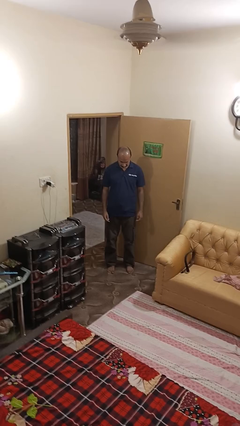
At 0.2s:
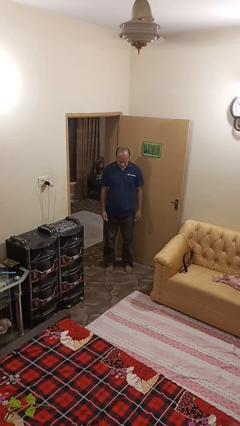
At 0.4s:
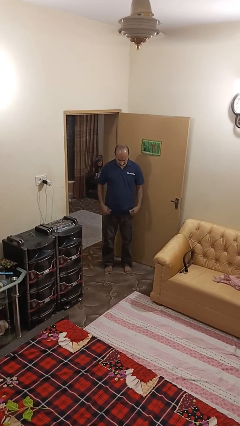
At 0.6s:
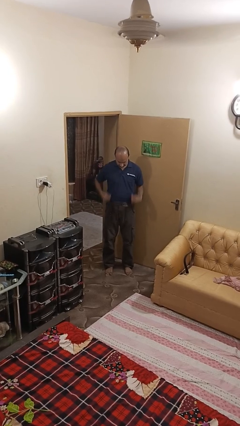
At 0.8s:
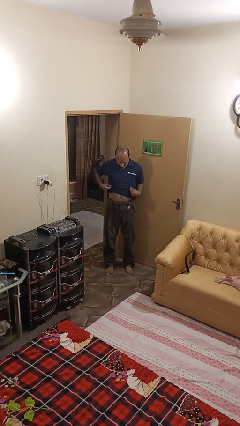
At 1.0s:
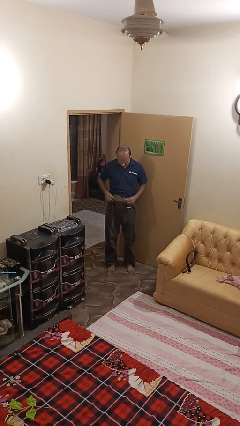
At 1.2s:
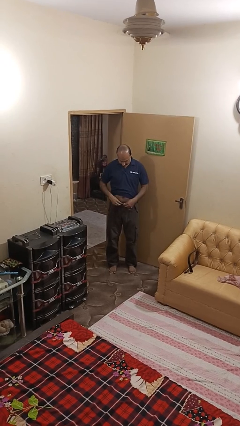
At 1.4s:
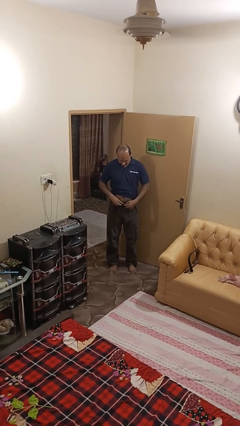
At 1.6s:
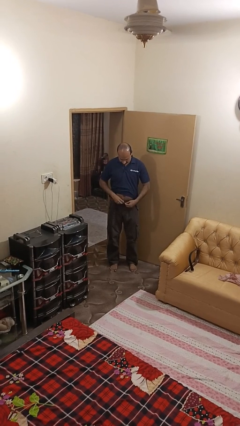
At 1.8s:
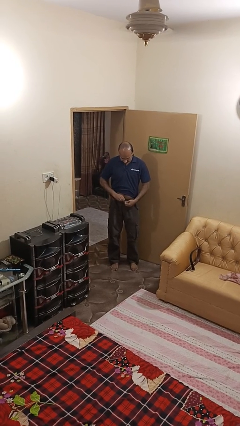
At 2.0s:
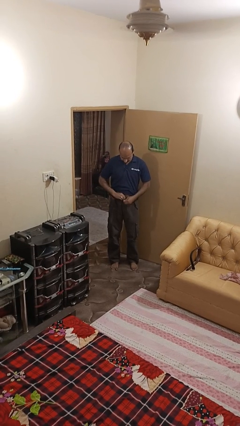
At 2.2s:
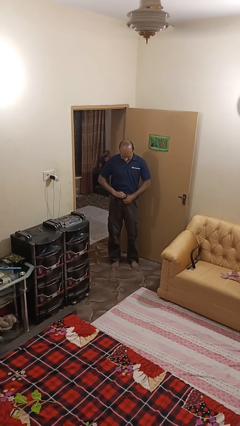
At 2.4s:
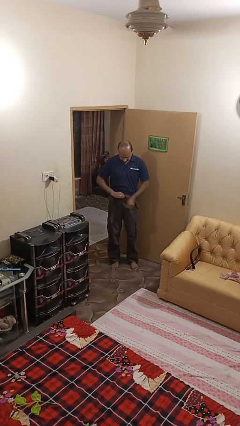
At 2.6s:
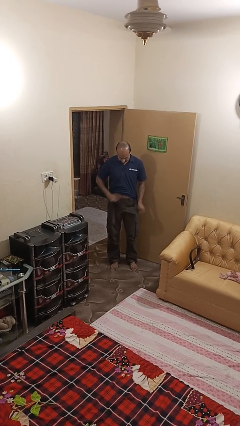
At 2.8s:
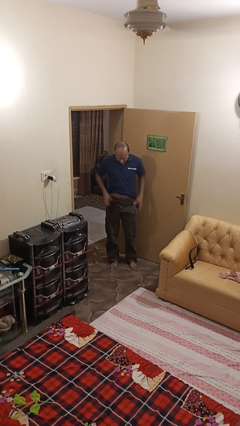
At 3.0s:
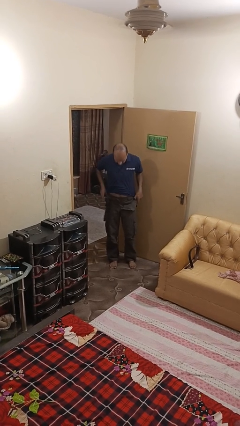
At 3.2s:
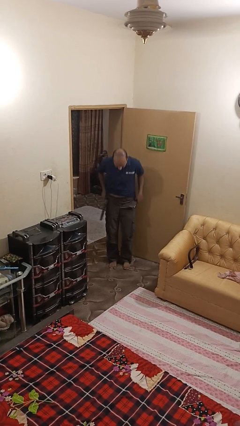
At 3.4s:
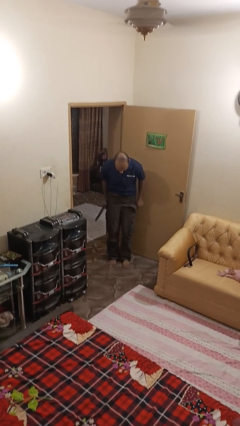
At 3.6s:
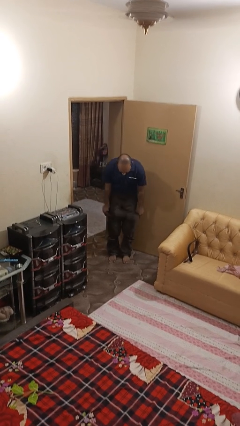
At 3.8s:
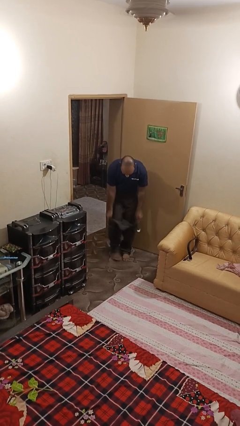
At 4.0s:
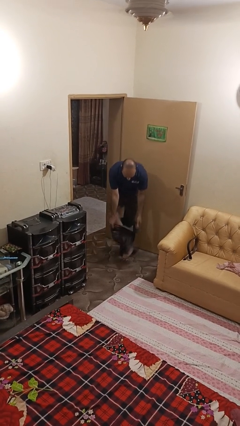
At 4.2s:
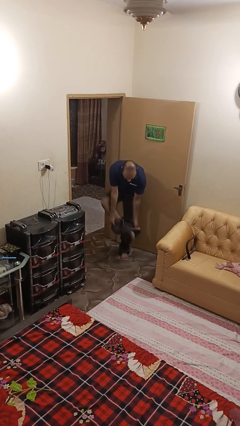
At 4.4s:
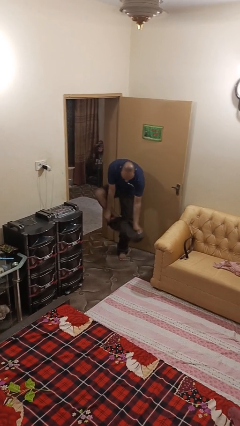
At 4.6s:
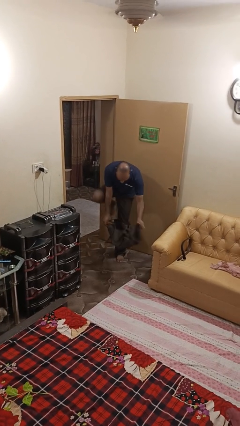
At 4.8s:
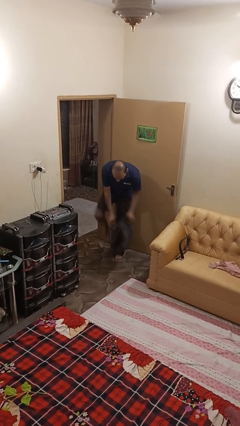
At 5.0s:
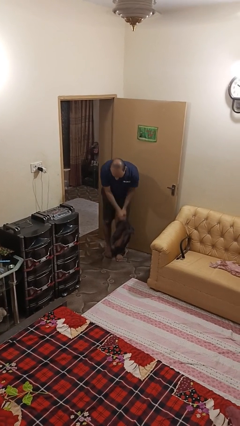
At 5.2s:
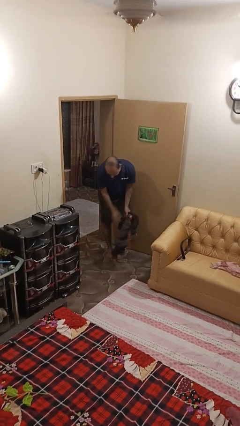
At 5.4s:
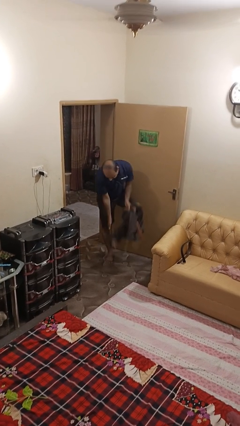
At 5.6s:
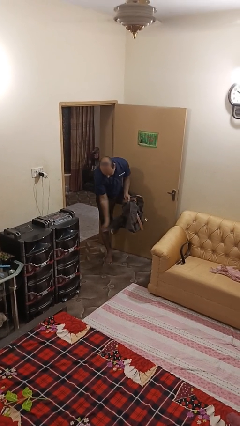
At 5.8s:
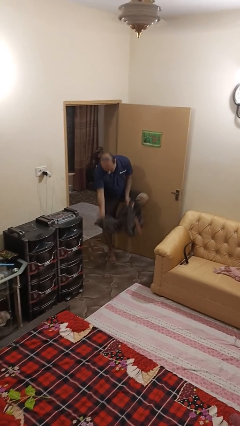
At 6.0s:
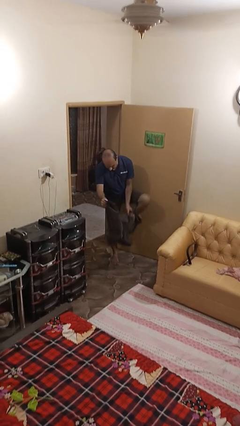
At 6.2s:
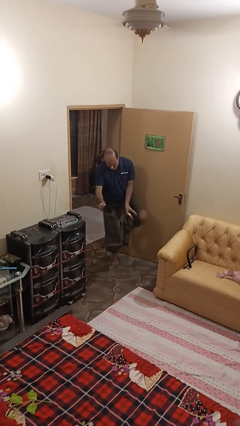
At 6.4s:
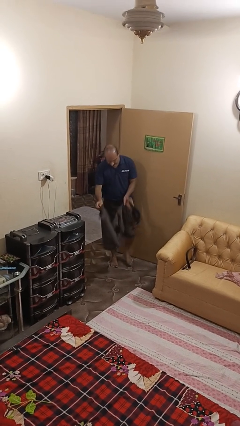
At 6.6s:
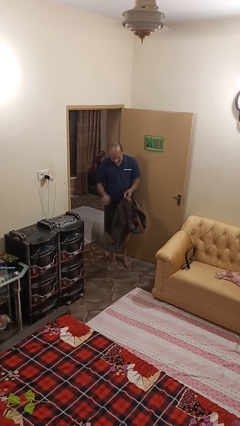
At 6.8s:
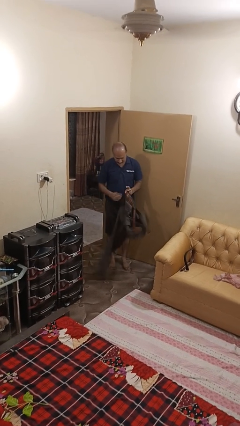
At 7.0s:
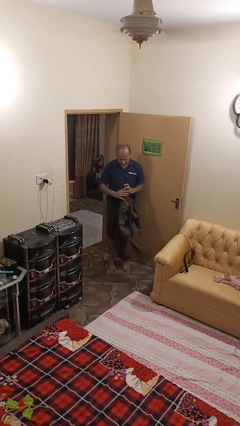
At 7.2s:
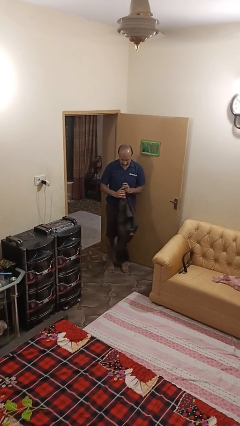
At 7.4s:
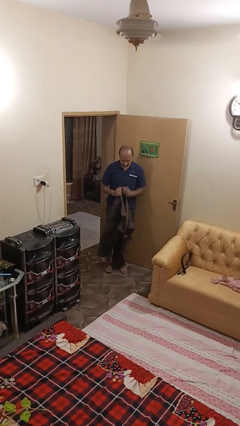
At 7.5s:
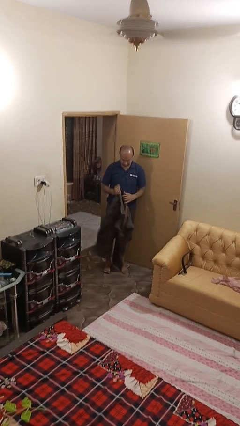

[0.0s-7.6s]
person takes off pants

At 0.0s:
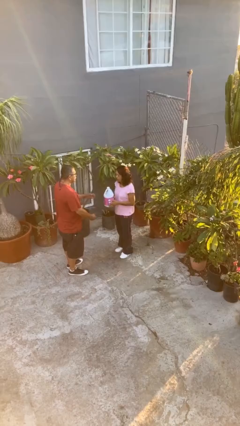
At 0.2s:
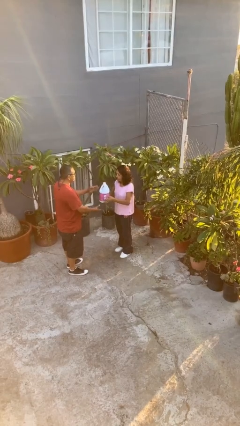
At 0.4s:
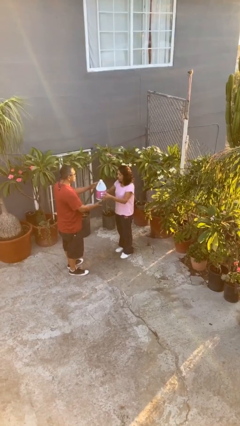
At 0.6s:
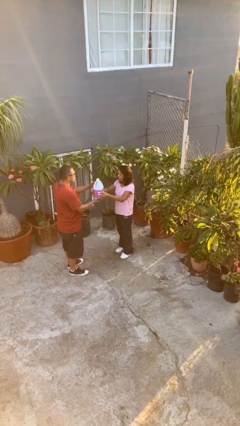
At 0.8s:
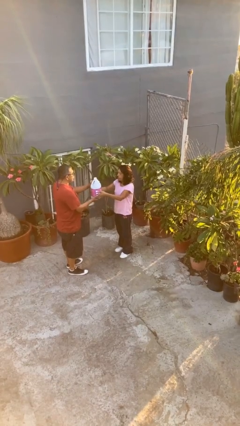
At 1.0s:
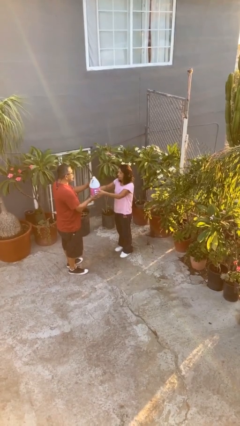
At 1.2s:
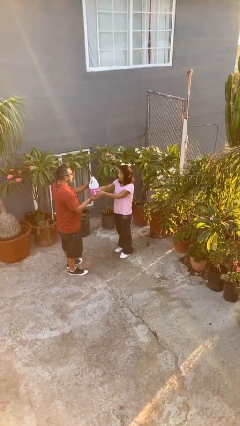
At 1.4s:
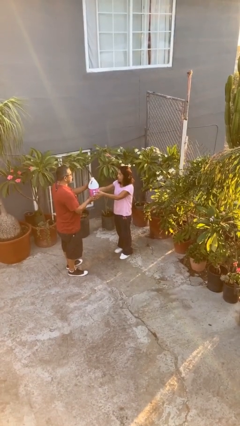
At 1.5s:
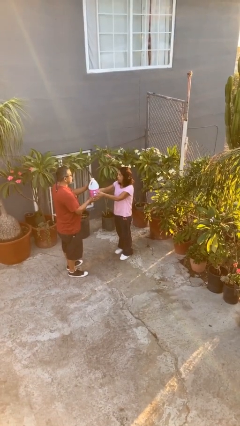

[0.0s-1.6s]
person transfers object to person

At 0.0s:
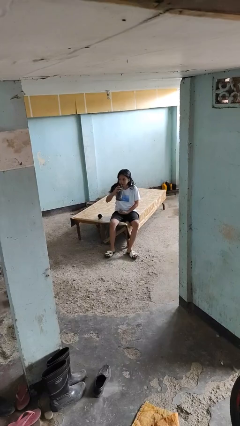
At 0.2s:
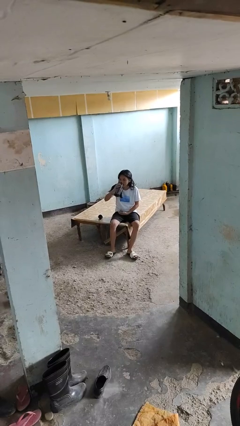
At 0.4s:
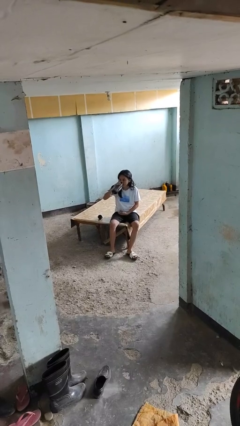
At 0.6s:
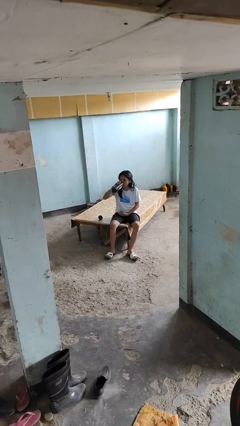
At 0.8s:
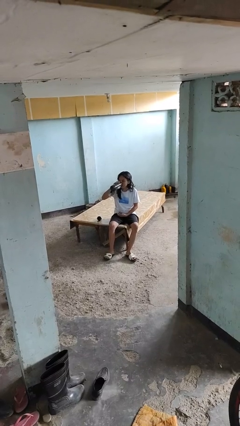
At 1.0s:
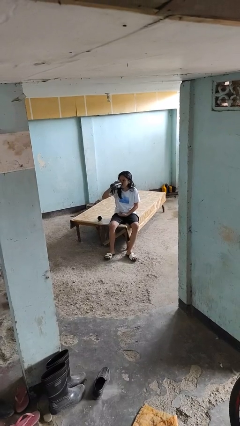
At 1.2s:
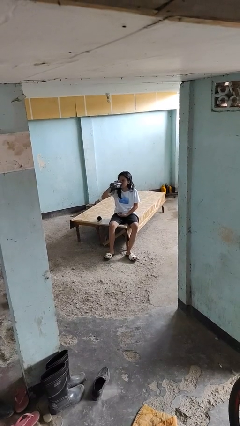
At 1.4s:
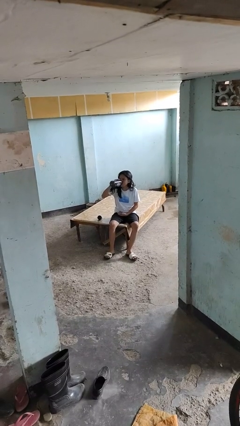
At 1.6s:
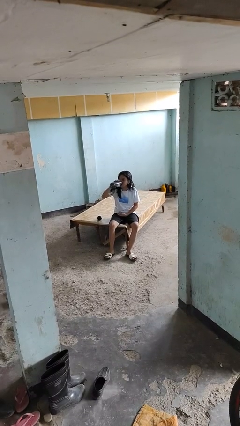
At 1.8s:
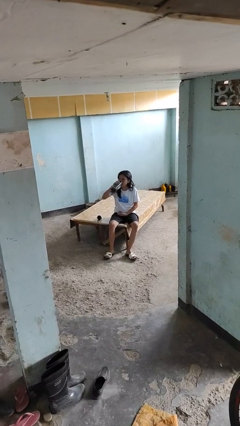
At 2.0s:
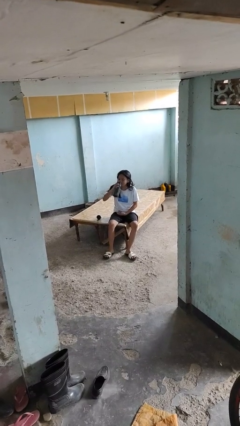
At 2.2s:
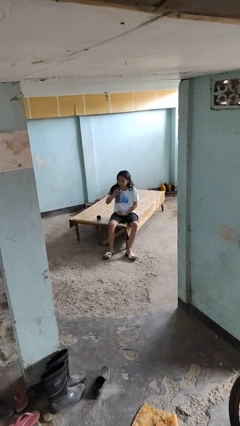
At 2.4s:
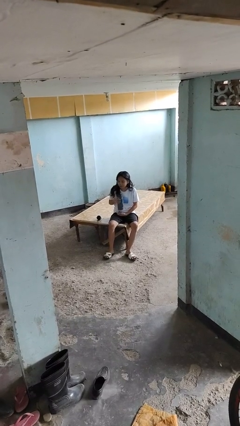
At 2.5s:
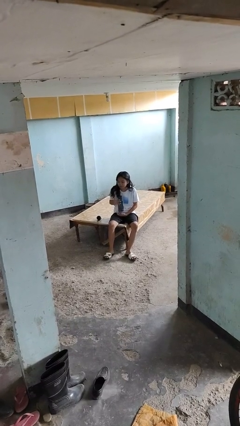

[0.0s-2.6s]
person drinks from bottle

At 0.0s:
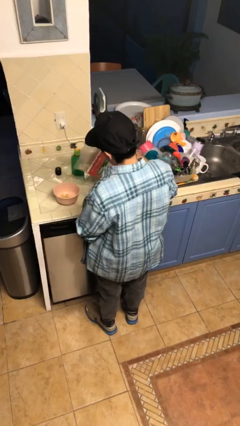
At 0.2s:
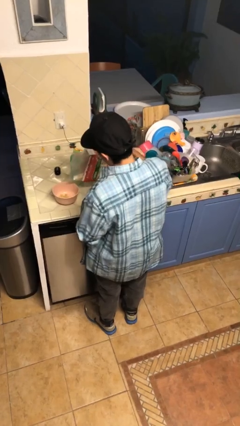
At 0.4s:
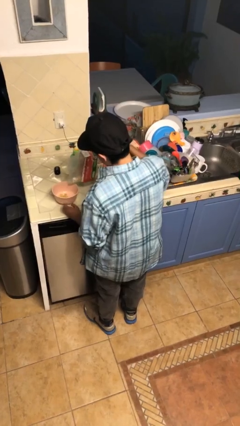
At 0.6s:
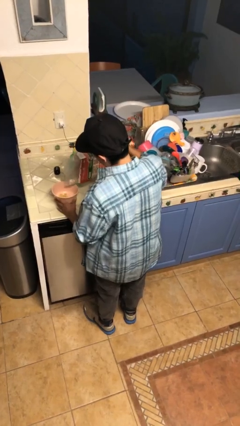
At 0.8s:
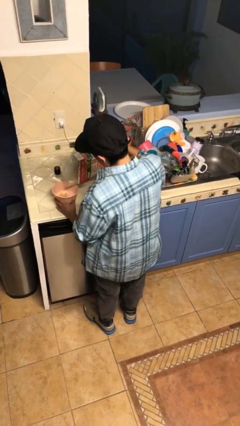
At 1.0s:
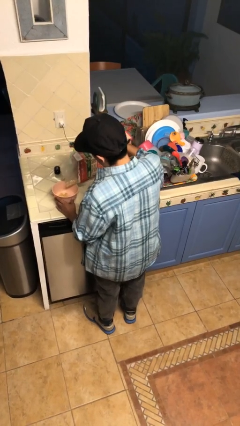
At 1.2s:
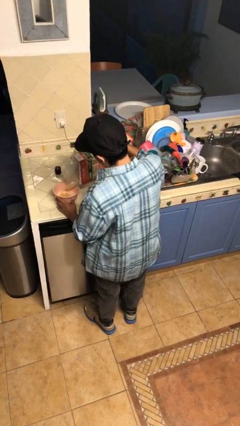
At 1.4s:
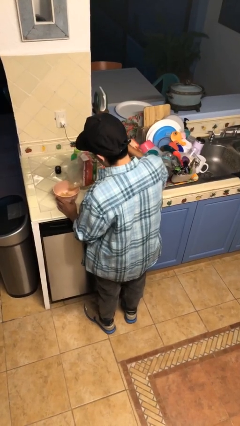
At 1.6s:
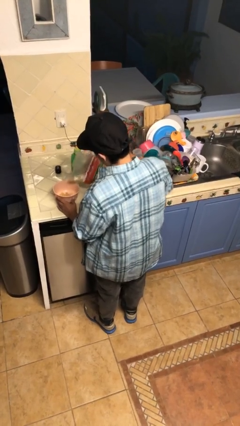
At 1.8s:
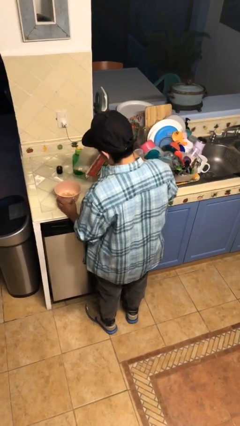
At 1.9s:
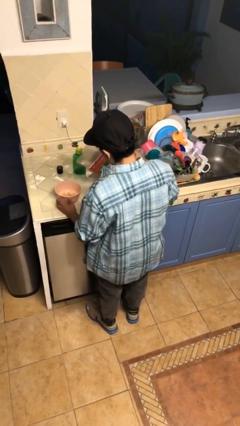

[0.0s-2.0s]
person pours into bowl

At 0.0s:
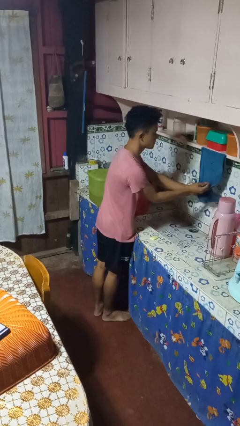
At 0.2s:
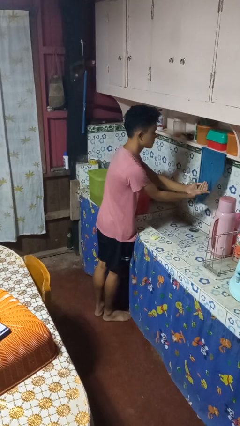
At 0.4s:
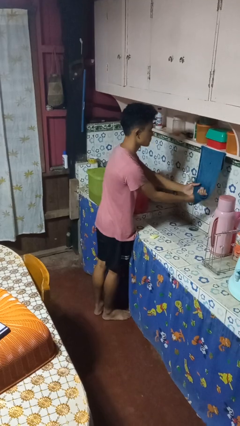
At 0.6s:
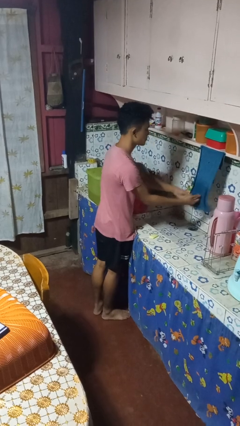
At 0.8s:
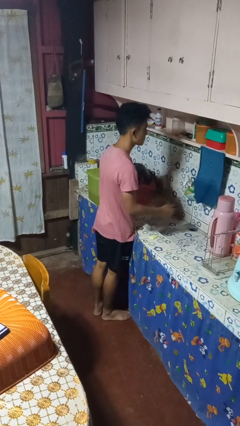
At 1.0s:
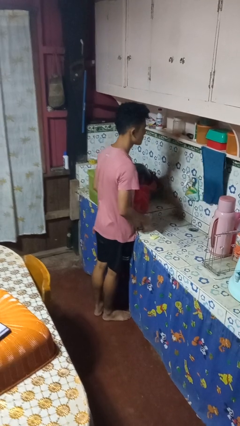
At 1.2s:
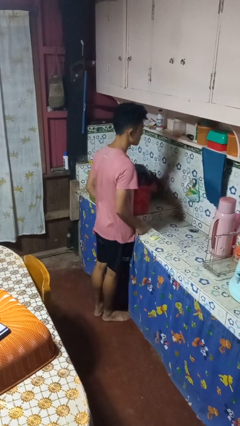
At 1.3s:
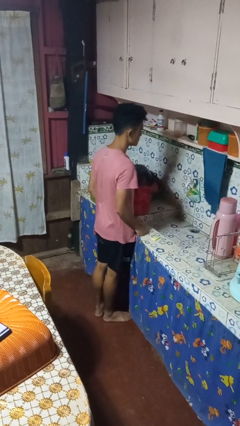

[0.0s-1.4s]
person dries hands with towel

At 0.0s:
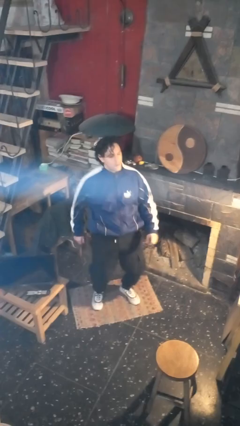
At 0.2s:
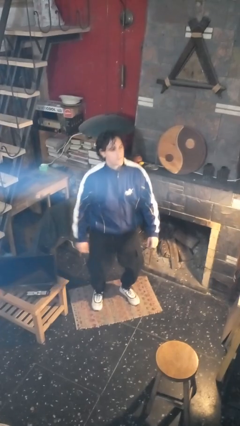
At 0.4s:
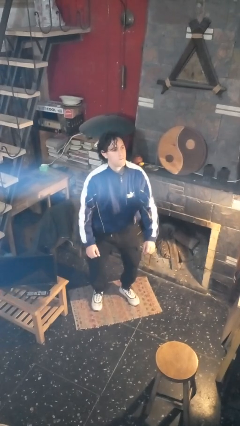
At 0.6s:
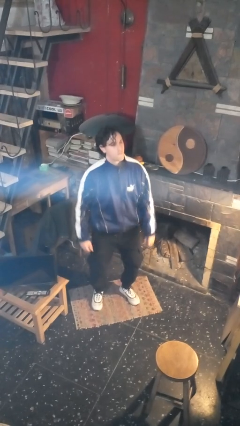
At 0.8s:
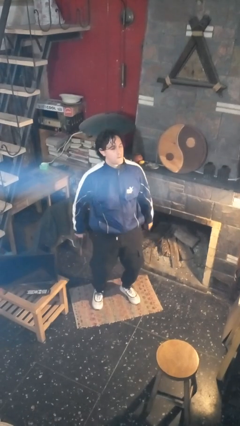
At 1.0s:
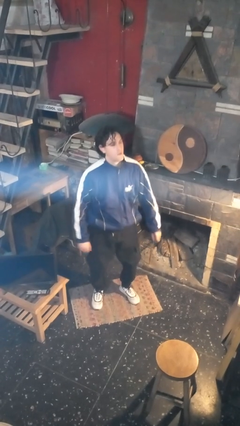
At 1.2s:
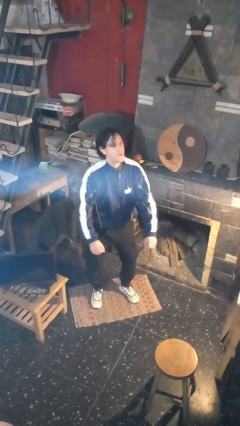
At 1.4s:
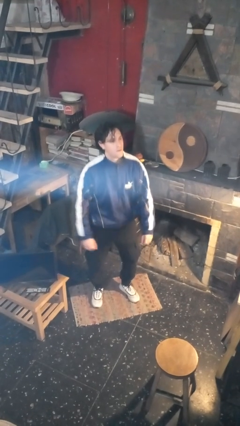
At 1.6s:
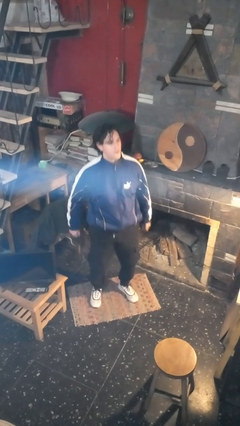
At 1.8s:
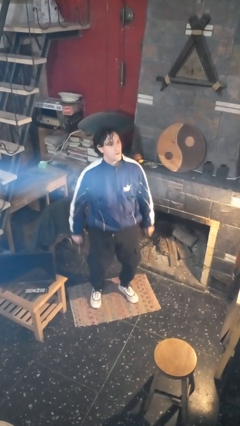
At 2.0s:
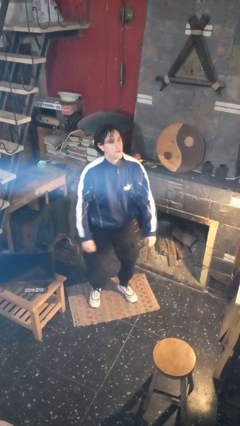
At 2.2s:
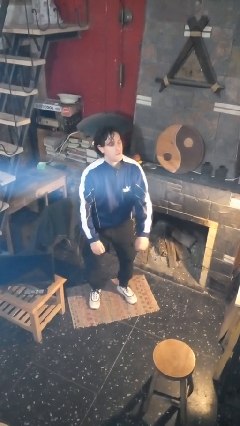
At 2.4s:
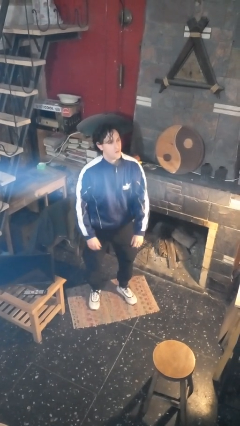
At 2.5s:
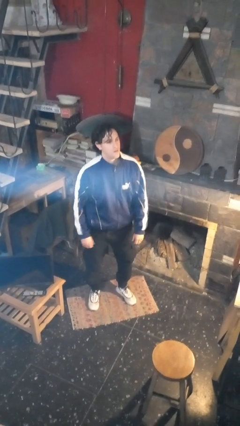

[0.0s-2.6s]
person wiggles hips
